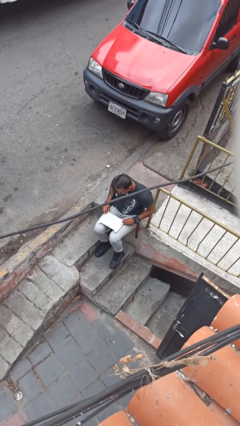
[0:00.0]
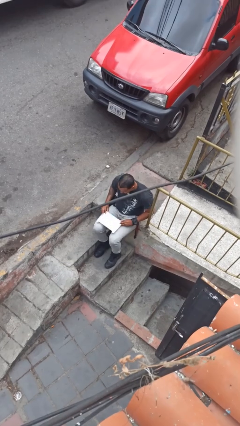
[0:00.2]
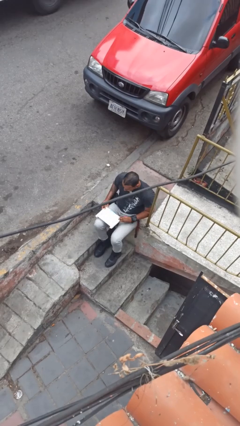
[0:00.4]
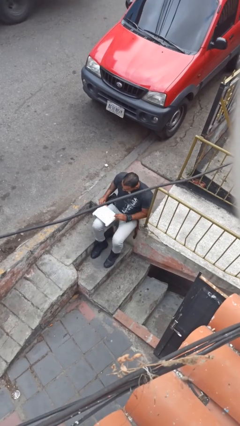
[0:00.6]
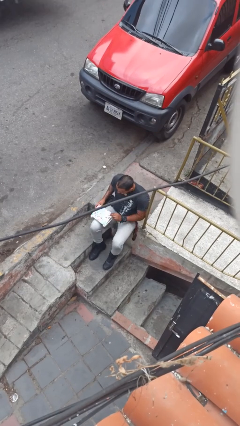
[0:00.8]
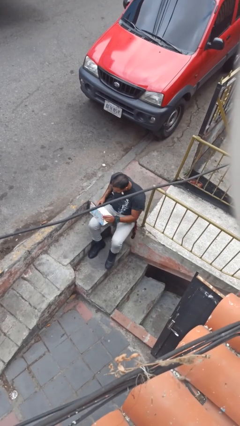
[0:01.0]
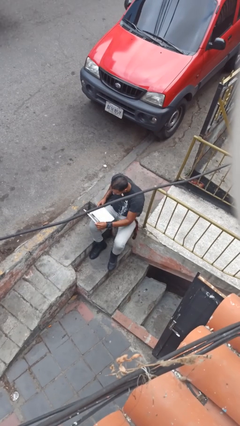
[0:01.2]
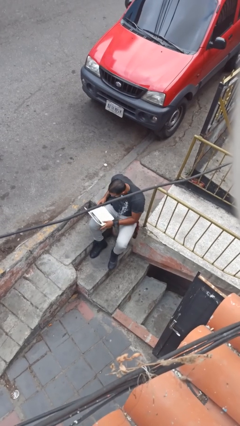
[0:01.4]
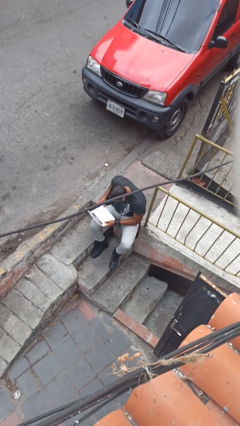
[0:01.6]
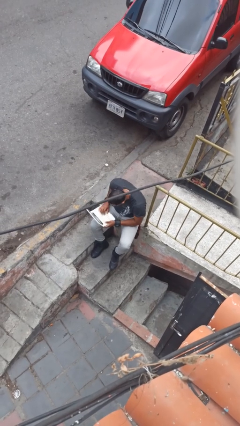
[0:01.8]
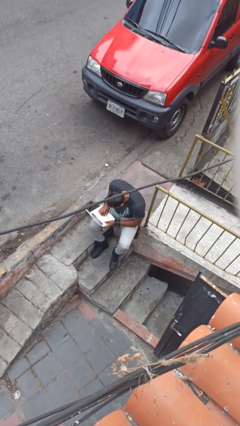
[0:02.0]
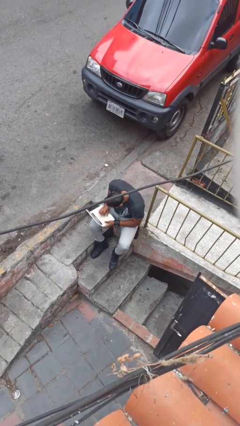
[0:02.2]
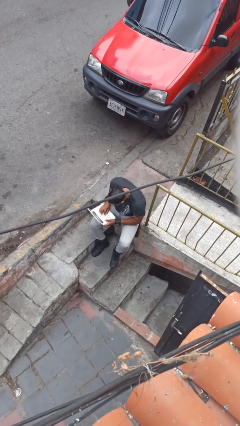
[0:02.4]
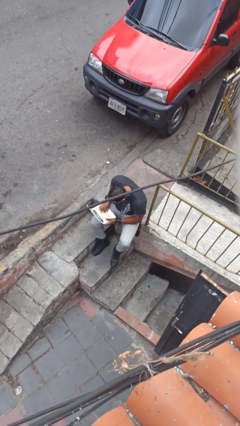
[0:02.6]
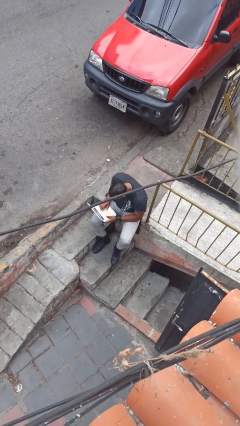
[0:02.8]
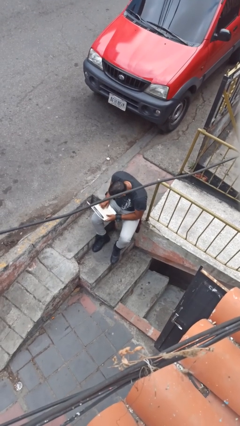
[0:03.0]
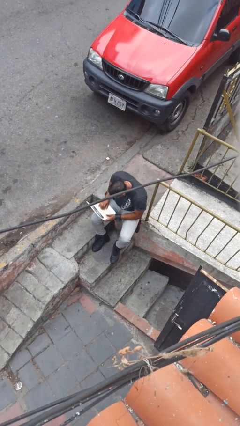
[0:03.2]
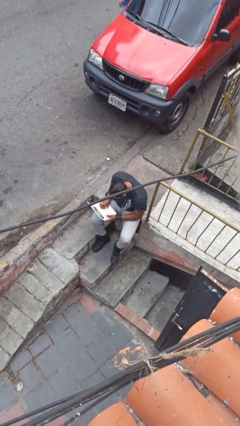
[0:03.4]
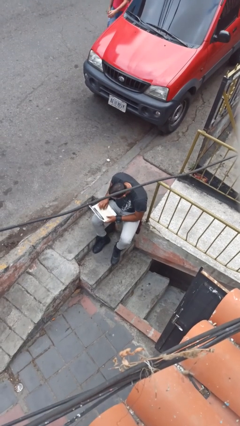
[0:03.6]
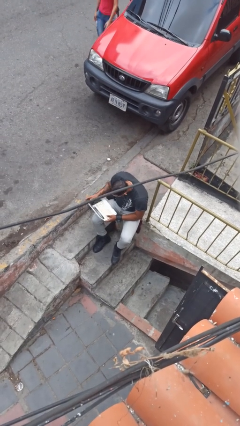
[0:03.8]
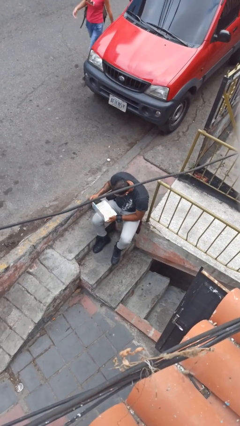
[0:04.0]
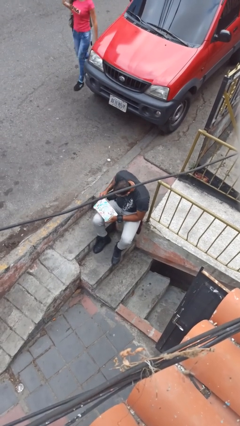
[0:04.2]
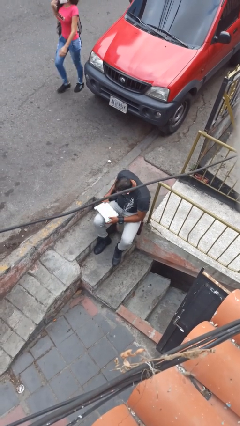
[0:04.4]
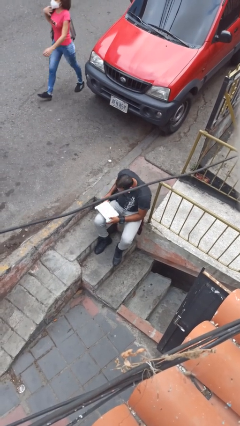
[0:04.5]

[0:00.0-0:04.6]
person interacts with laptop

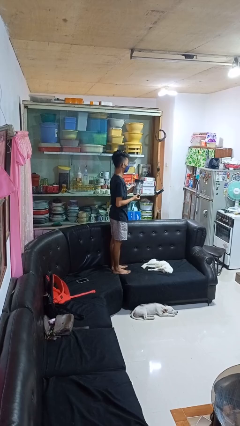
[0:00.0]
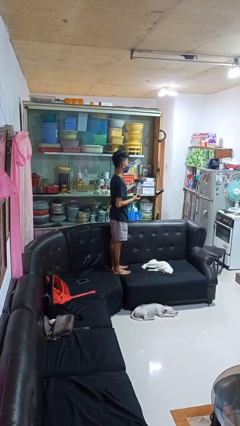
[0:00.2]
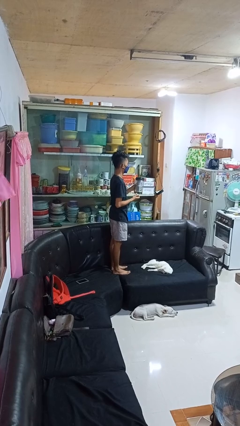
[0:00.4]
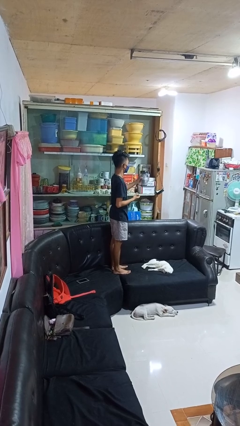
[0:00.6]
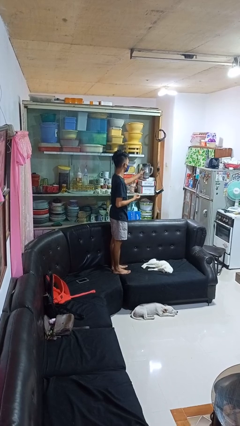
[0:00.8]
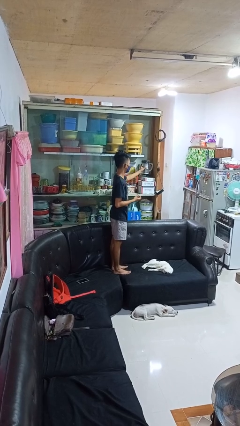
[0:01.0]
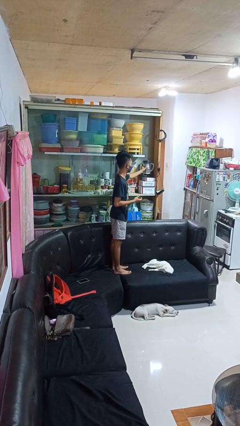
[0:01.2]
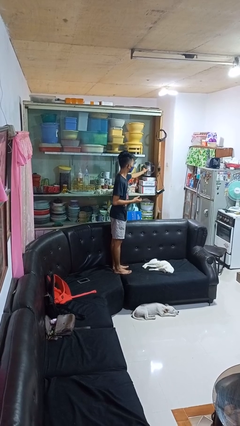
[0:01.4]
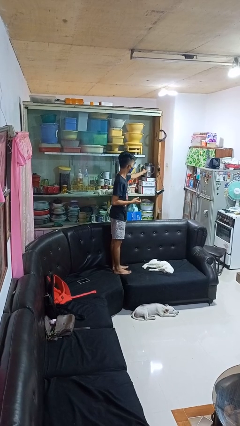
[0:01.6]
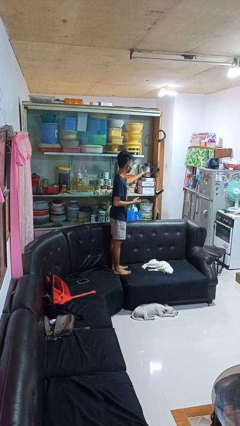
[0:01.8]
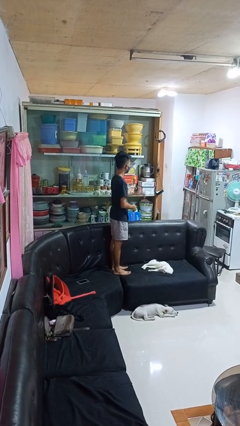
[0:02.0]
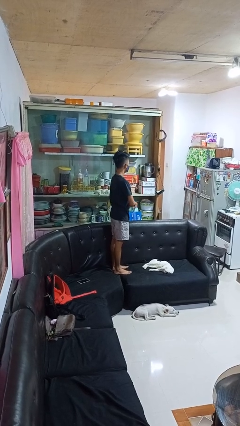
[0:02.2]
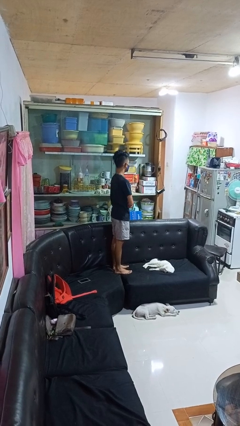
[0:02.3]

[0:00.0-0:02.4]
person puts down object into cabinet

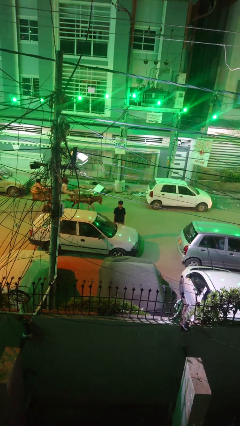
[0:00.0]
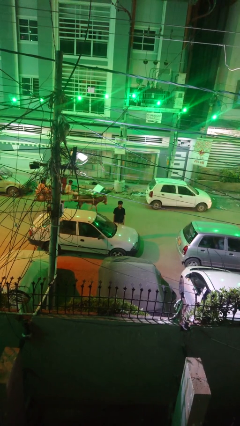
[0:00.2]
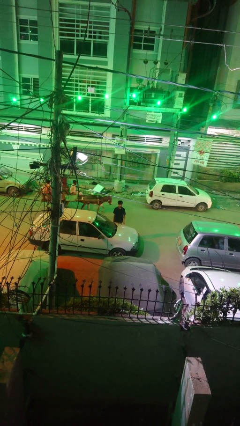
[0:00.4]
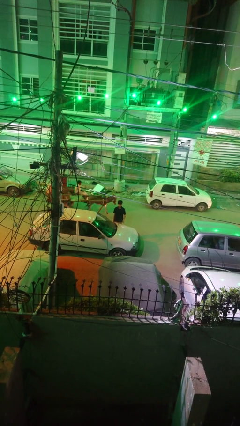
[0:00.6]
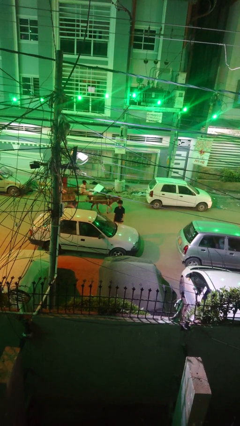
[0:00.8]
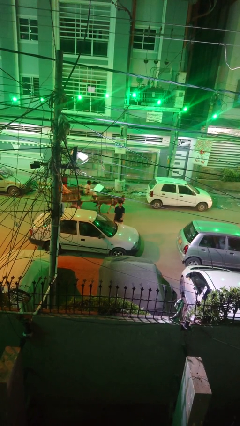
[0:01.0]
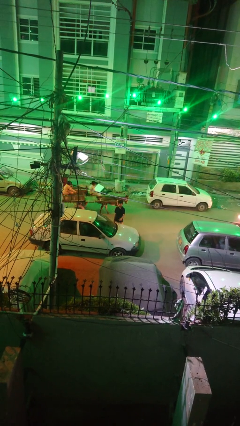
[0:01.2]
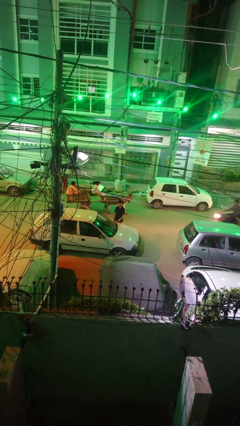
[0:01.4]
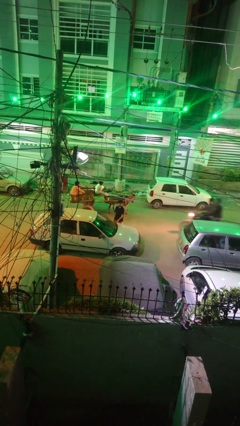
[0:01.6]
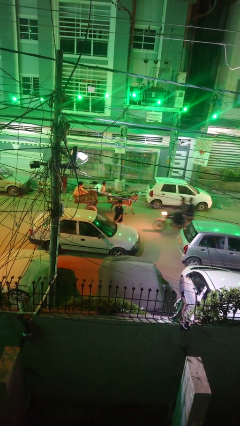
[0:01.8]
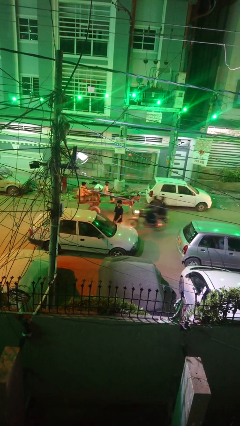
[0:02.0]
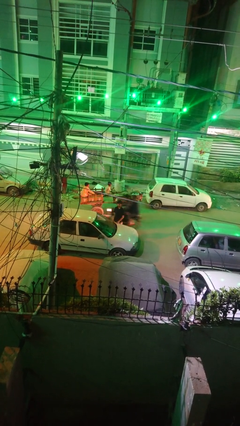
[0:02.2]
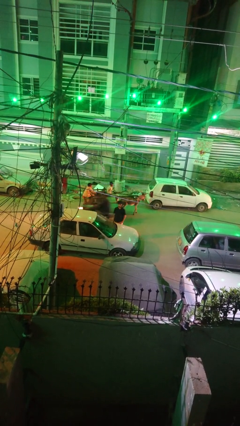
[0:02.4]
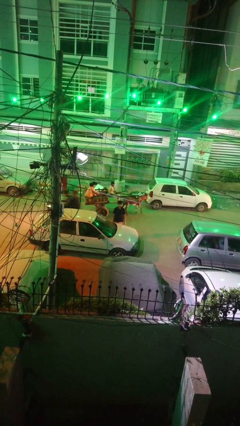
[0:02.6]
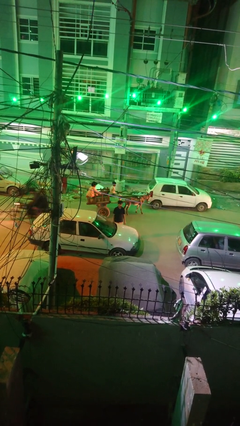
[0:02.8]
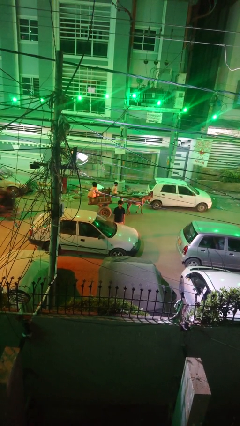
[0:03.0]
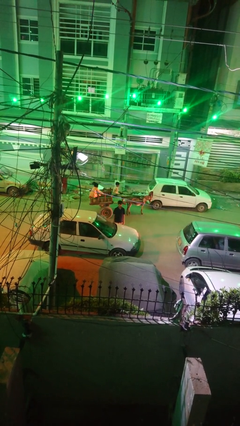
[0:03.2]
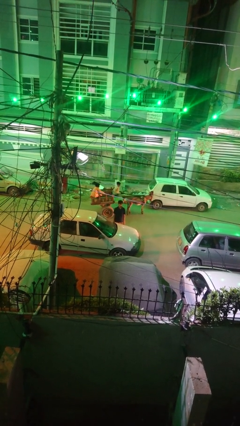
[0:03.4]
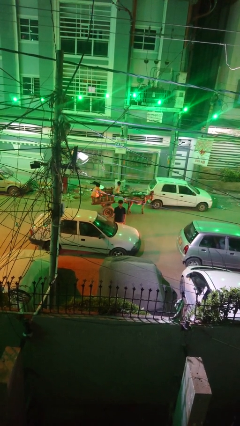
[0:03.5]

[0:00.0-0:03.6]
person flips down car wipers

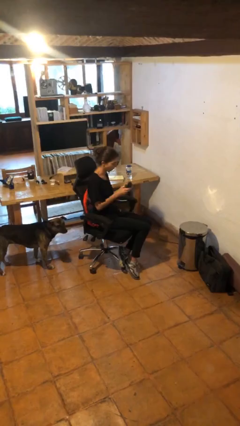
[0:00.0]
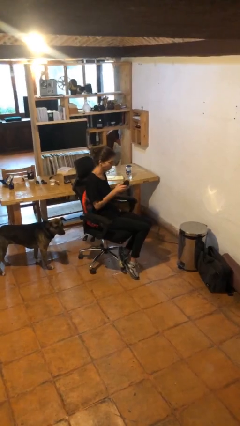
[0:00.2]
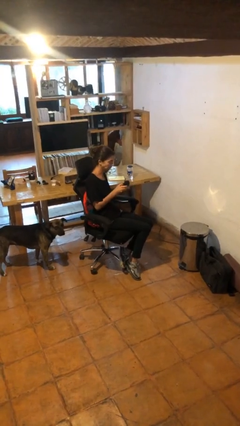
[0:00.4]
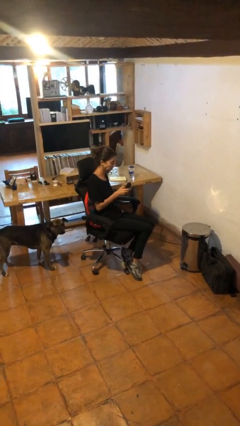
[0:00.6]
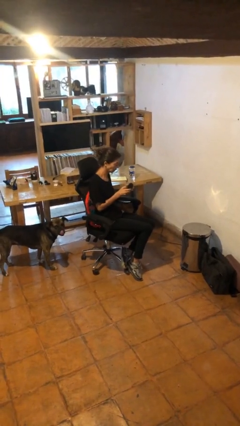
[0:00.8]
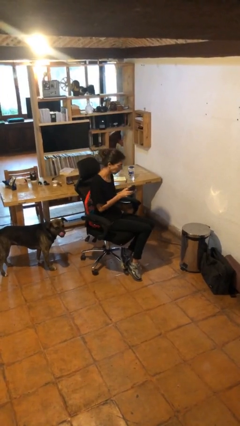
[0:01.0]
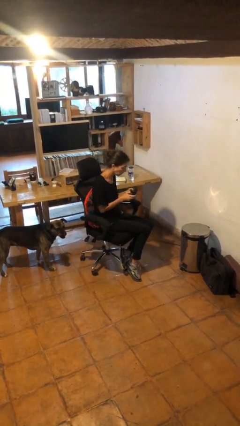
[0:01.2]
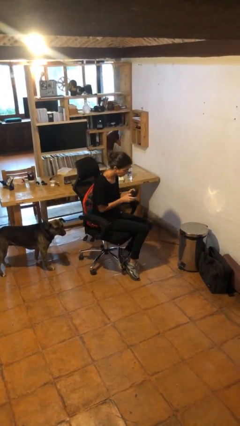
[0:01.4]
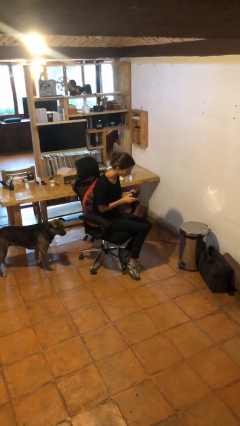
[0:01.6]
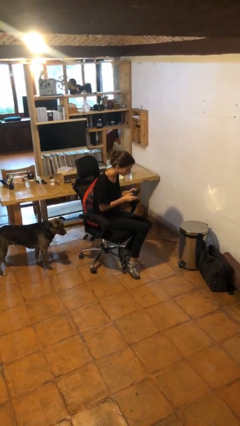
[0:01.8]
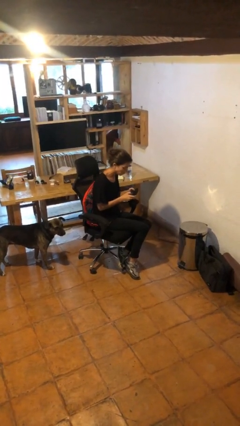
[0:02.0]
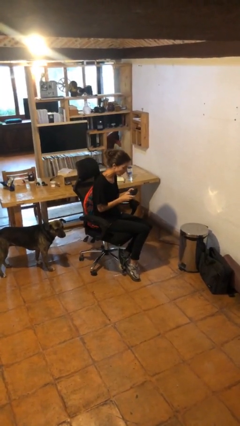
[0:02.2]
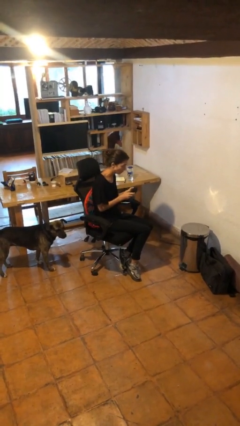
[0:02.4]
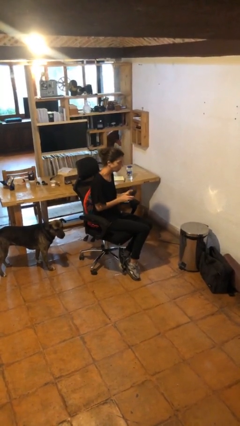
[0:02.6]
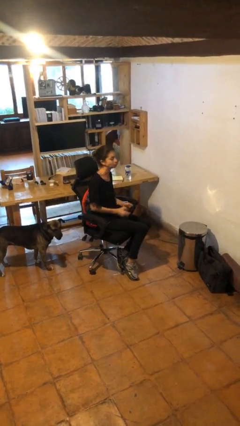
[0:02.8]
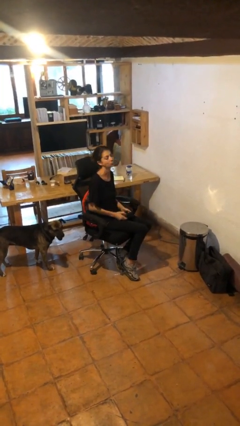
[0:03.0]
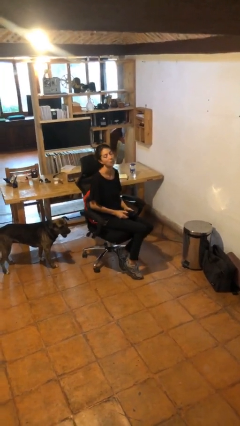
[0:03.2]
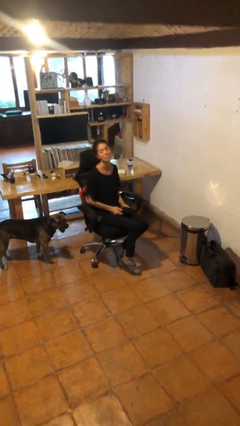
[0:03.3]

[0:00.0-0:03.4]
person interacts with handheld game

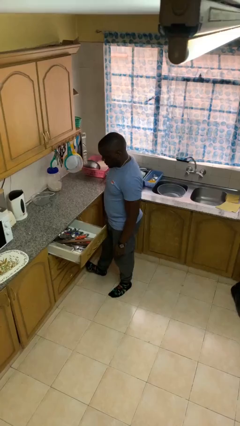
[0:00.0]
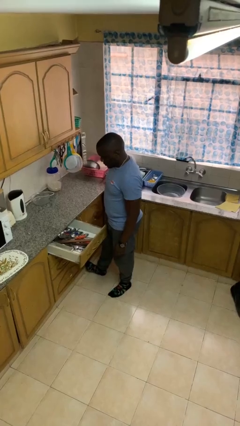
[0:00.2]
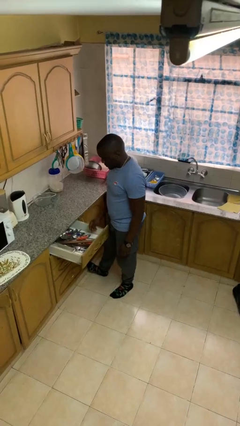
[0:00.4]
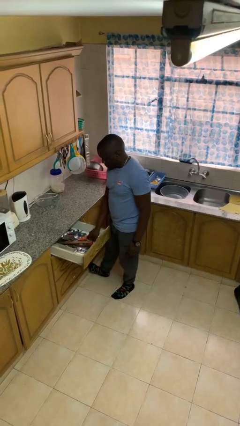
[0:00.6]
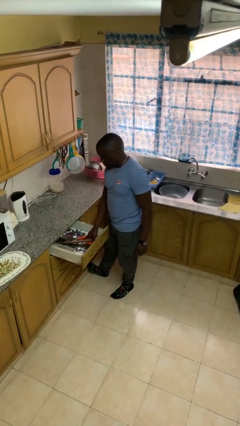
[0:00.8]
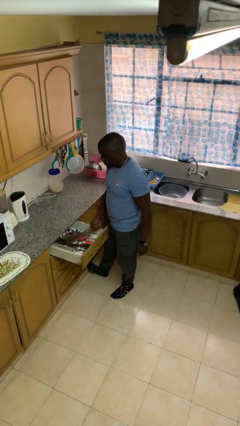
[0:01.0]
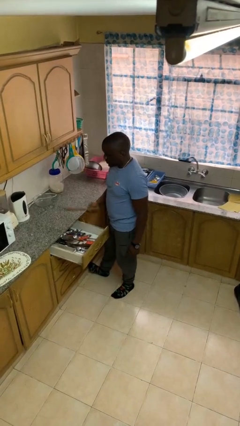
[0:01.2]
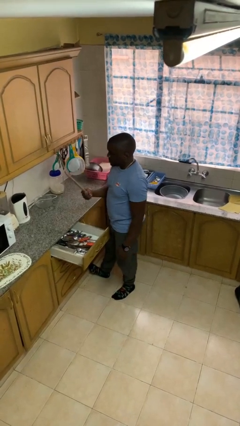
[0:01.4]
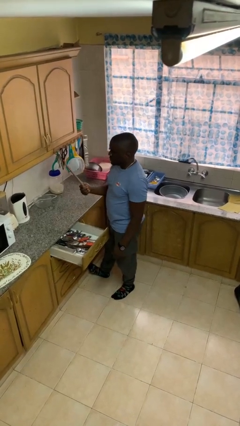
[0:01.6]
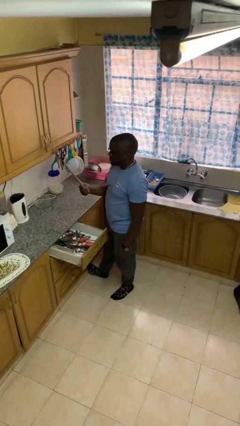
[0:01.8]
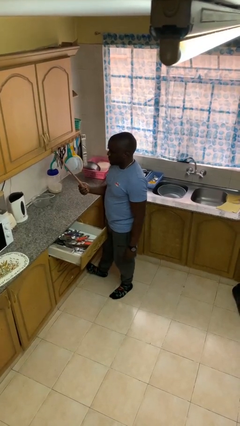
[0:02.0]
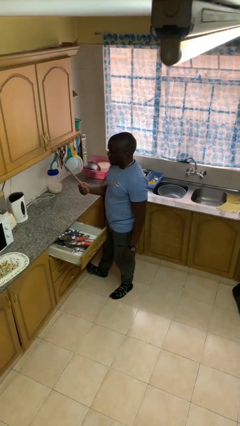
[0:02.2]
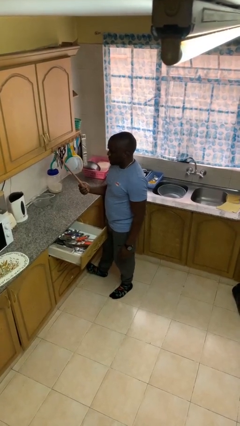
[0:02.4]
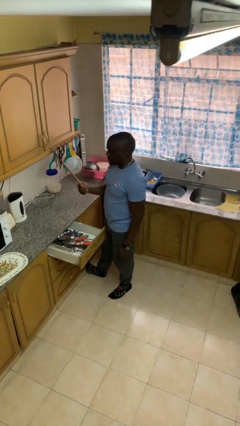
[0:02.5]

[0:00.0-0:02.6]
person takes object from kitchen drawer

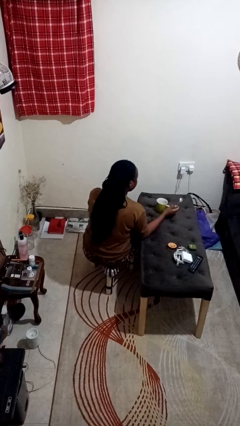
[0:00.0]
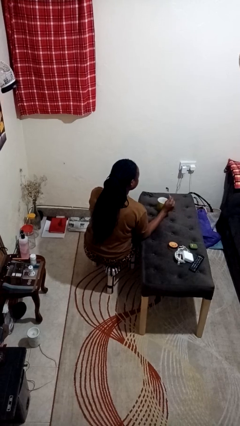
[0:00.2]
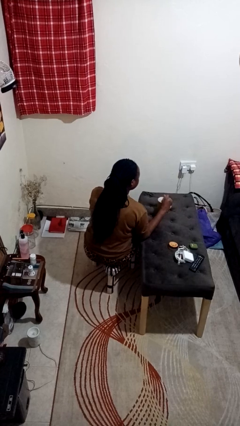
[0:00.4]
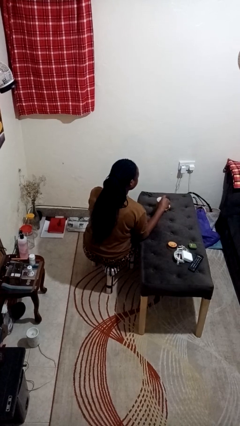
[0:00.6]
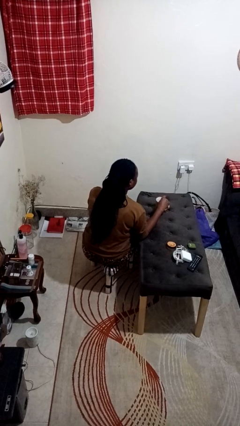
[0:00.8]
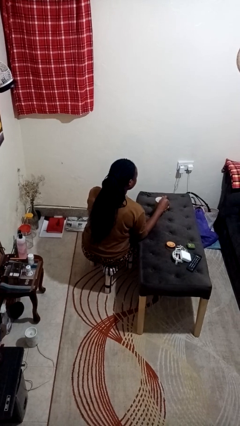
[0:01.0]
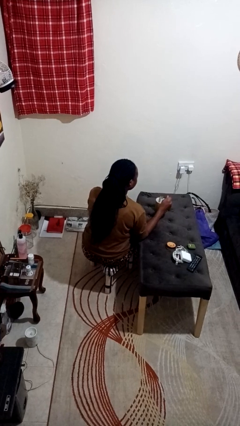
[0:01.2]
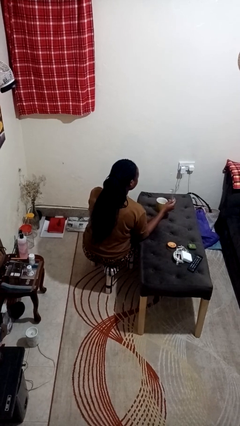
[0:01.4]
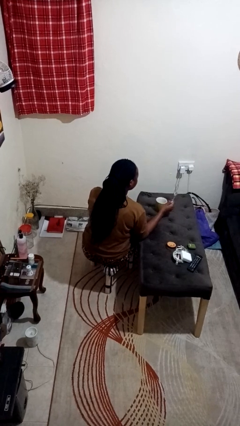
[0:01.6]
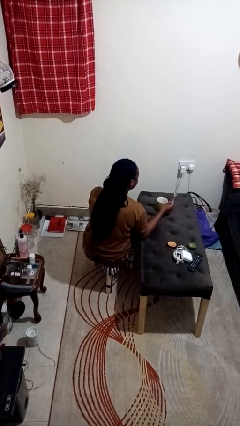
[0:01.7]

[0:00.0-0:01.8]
person stirs mug
